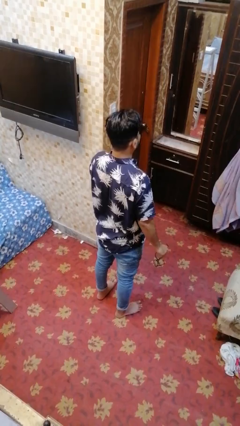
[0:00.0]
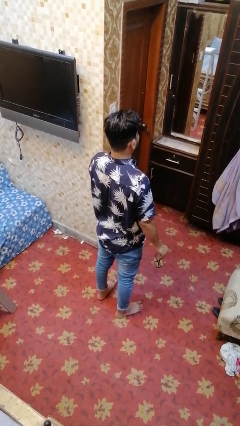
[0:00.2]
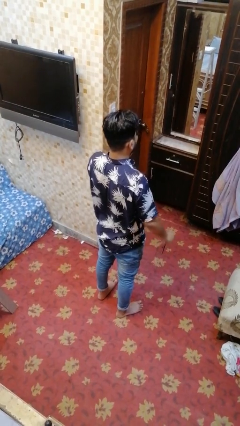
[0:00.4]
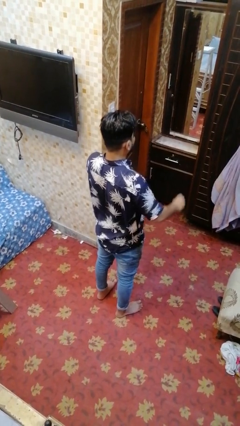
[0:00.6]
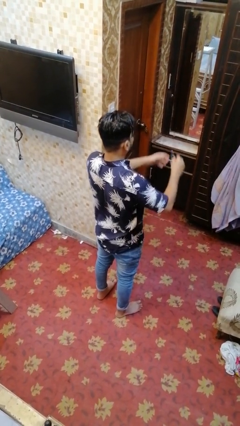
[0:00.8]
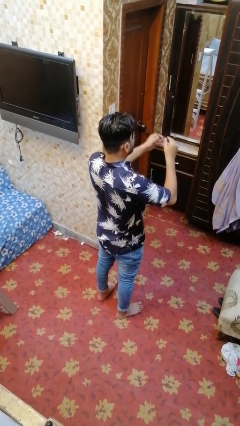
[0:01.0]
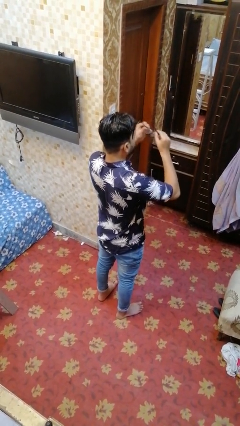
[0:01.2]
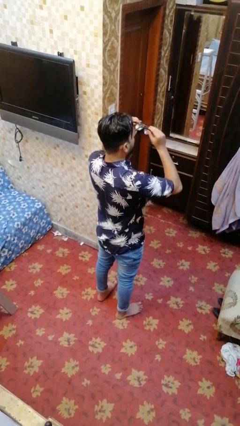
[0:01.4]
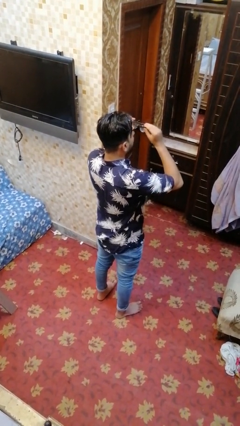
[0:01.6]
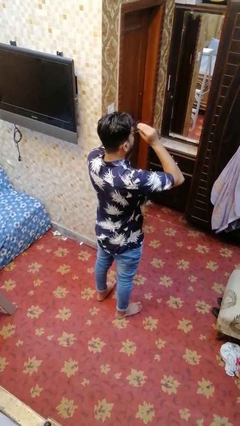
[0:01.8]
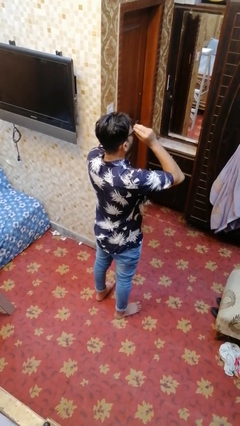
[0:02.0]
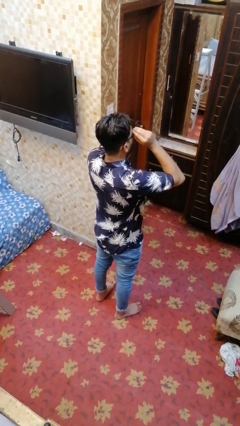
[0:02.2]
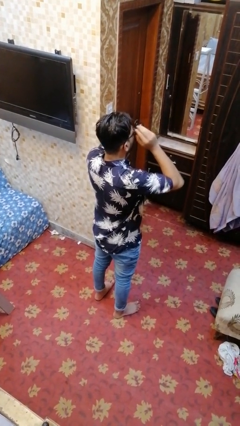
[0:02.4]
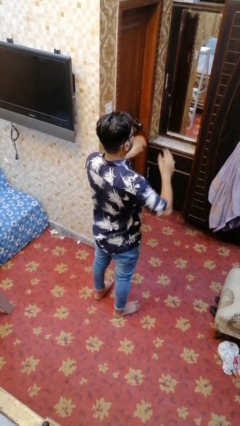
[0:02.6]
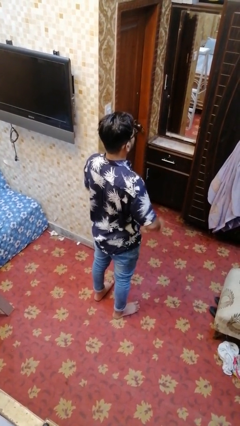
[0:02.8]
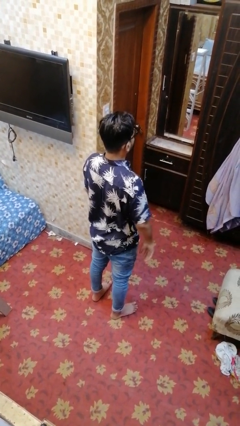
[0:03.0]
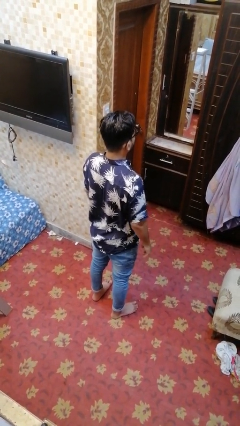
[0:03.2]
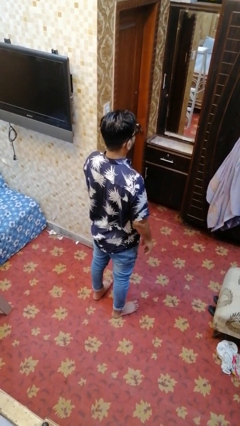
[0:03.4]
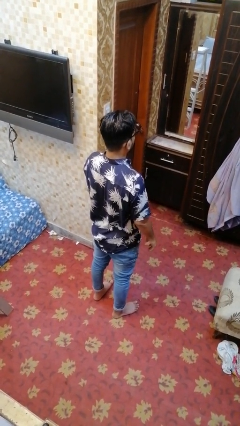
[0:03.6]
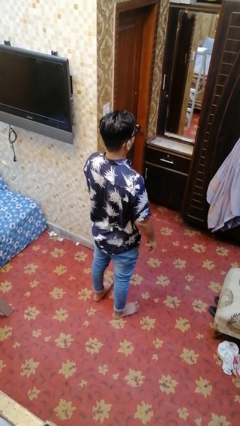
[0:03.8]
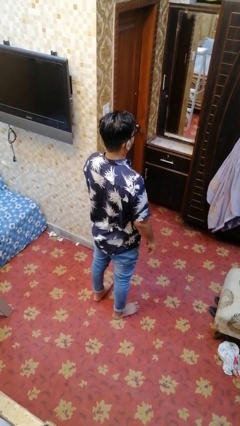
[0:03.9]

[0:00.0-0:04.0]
person puts on glasses

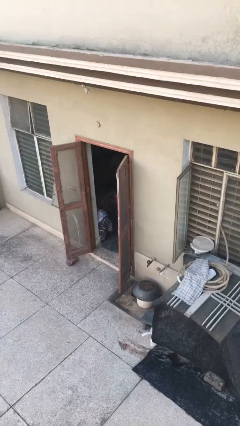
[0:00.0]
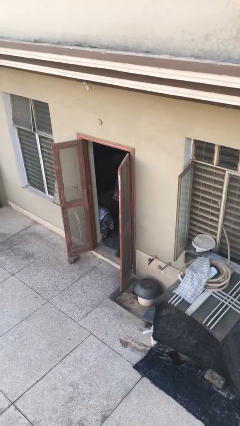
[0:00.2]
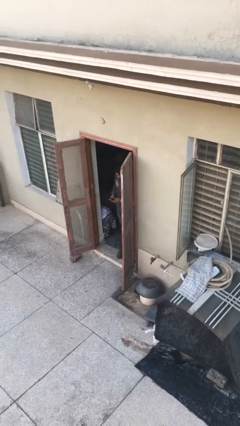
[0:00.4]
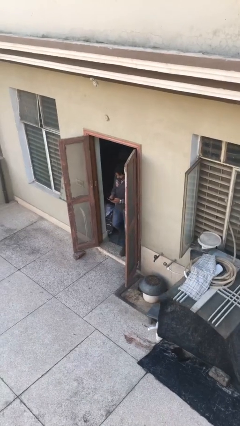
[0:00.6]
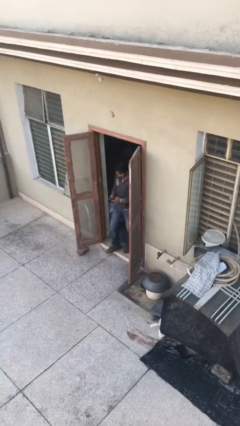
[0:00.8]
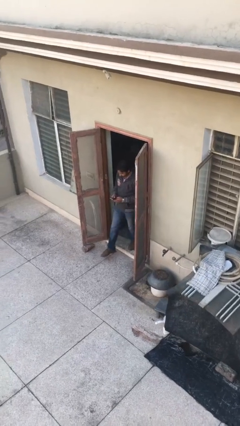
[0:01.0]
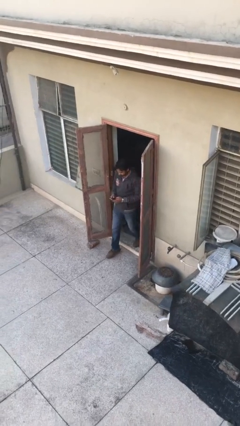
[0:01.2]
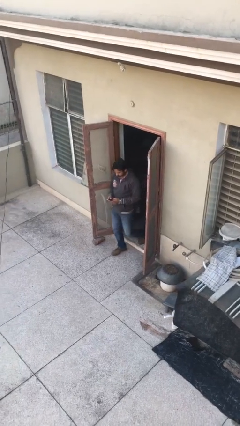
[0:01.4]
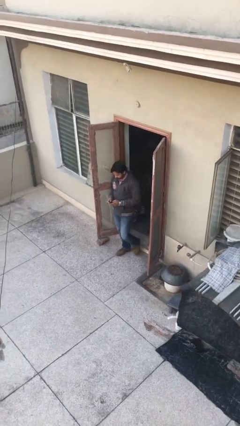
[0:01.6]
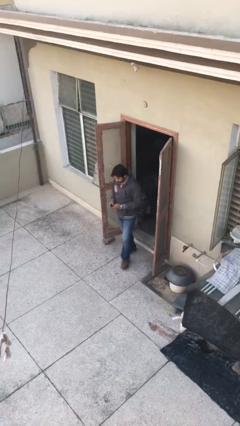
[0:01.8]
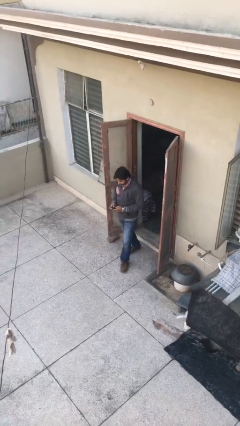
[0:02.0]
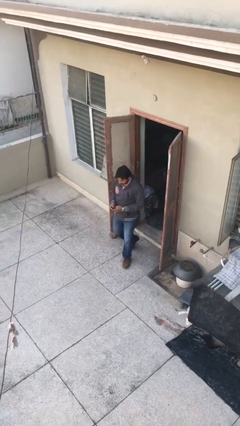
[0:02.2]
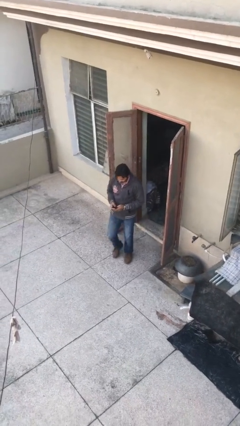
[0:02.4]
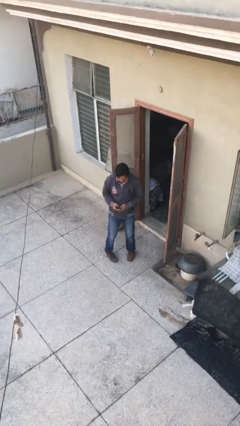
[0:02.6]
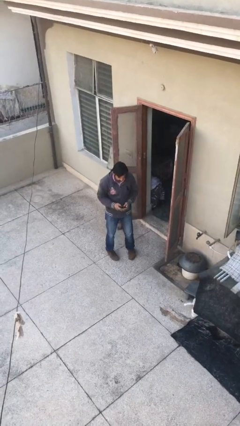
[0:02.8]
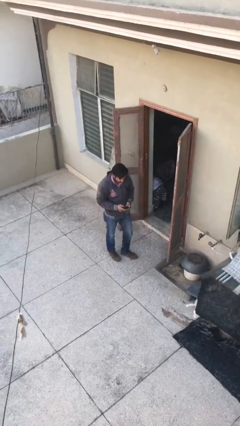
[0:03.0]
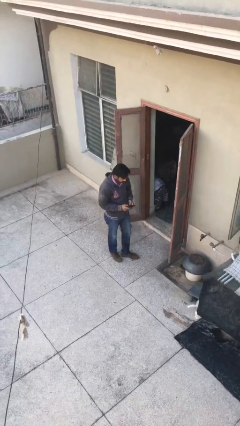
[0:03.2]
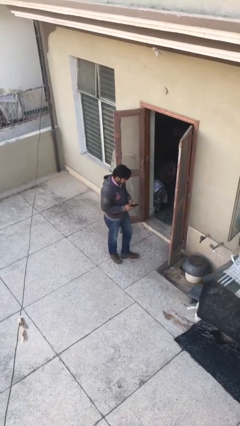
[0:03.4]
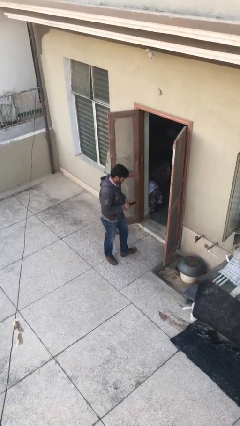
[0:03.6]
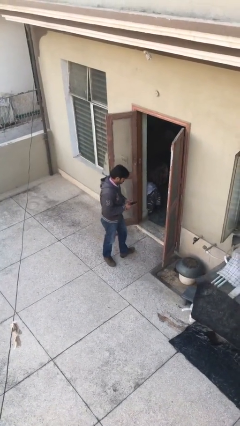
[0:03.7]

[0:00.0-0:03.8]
person enters scene through structure

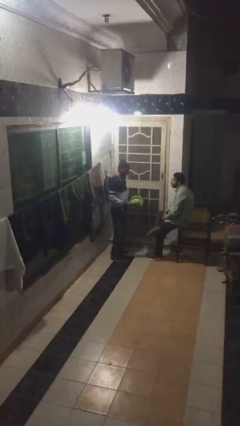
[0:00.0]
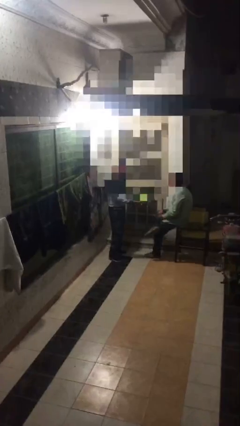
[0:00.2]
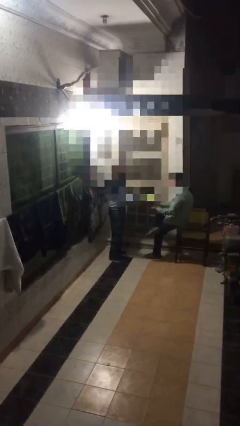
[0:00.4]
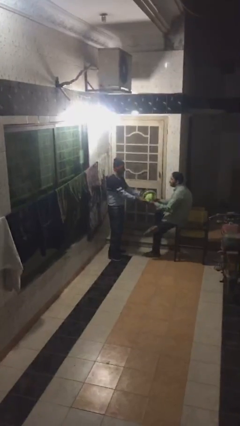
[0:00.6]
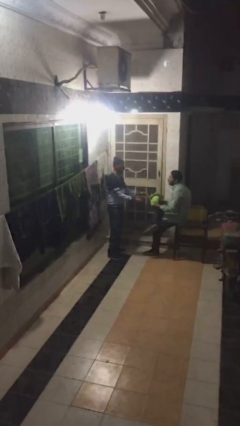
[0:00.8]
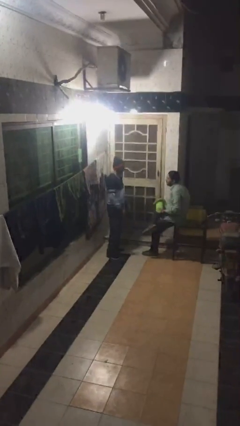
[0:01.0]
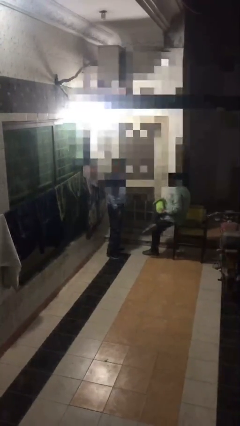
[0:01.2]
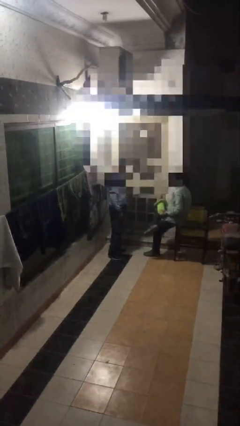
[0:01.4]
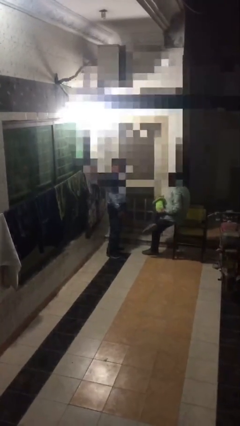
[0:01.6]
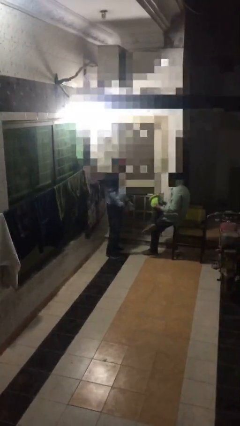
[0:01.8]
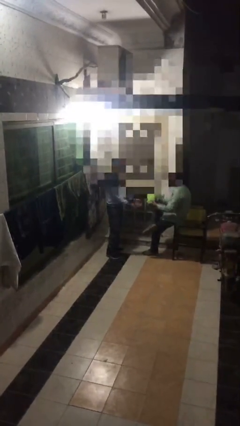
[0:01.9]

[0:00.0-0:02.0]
person transfers object to person

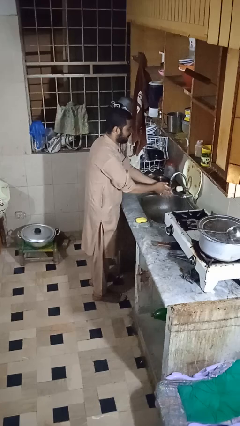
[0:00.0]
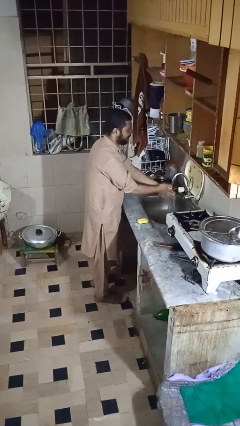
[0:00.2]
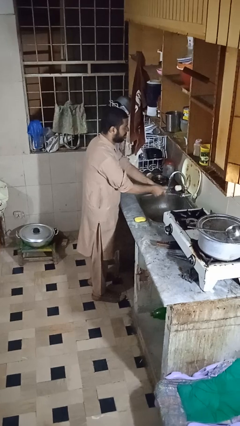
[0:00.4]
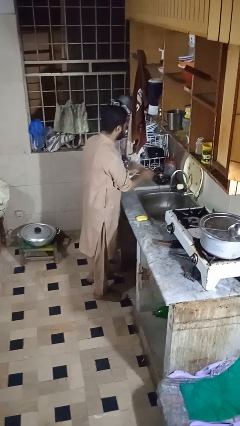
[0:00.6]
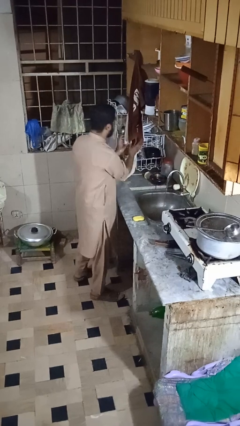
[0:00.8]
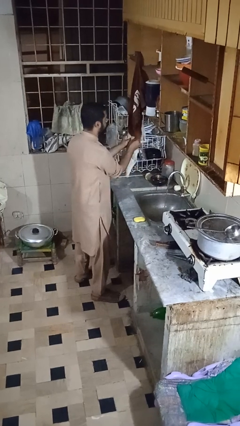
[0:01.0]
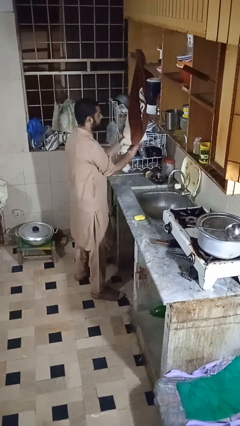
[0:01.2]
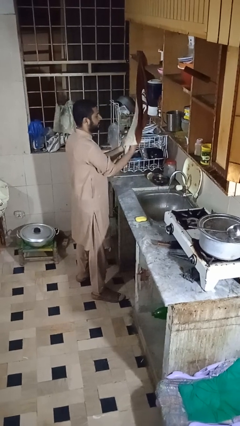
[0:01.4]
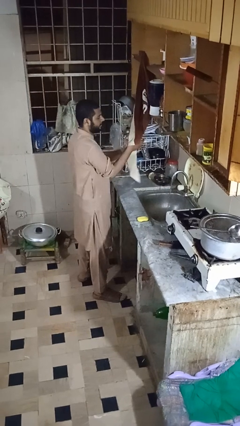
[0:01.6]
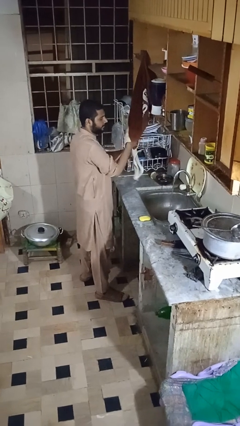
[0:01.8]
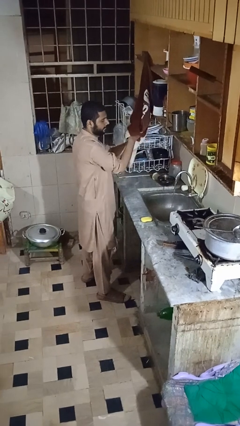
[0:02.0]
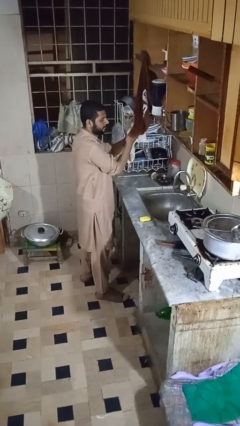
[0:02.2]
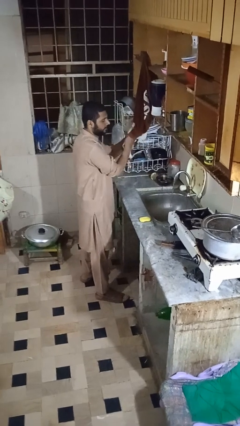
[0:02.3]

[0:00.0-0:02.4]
person dries hands with towel

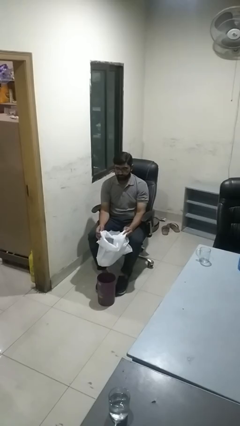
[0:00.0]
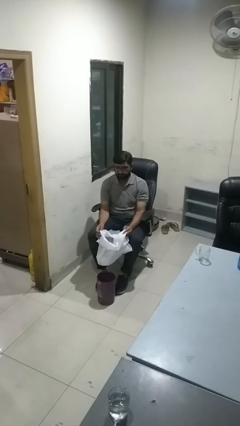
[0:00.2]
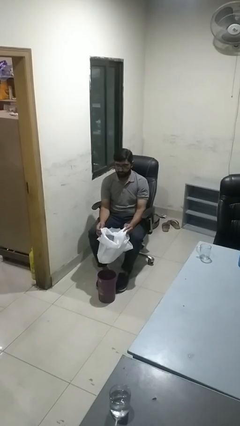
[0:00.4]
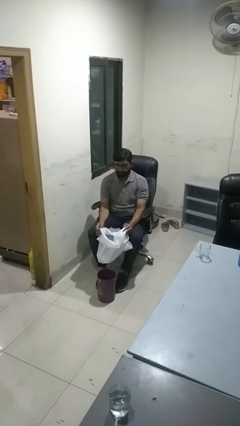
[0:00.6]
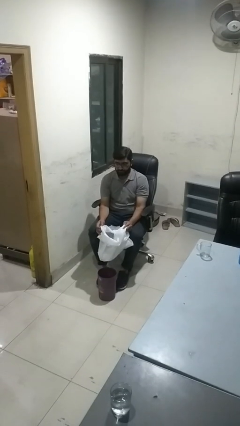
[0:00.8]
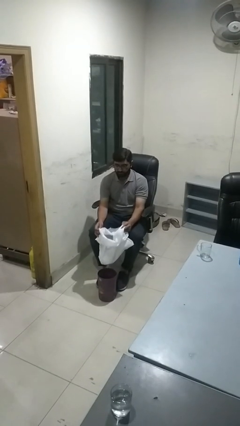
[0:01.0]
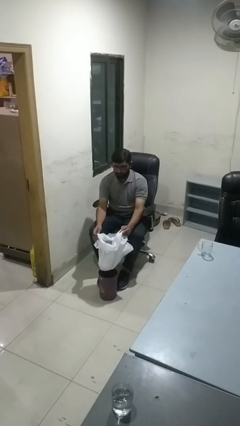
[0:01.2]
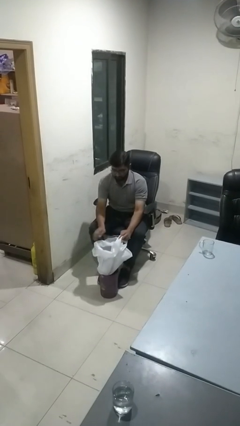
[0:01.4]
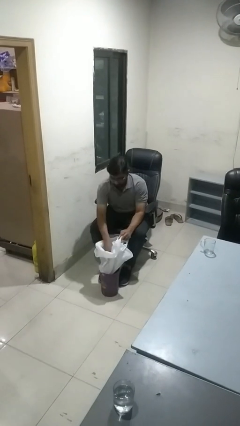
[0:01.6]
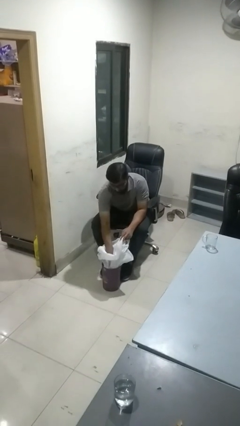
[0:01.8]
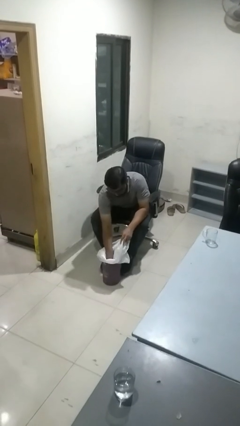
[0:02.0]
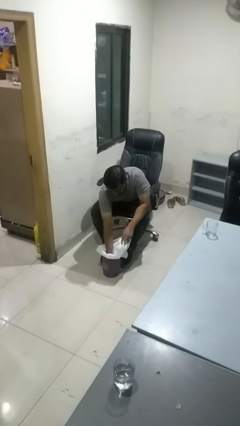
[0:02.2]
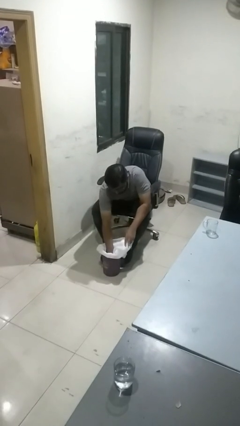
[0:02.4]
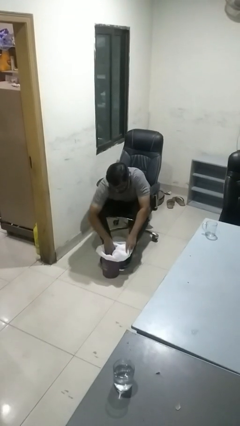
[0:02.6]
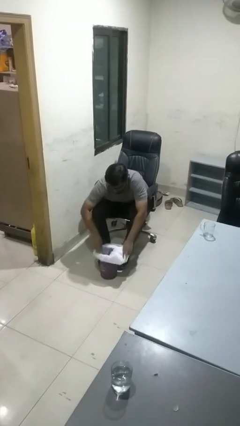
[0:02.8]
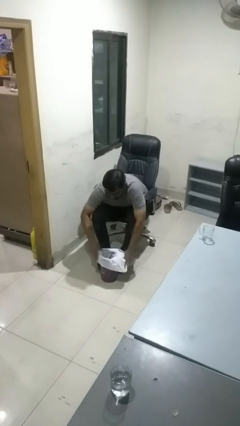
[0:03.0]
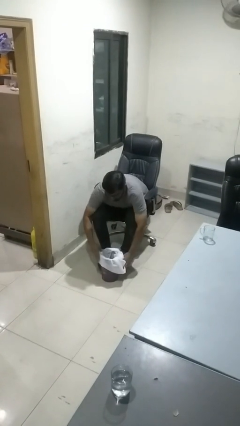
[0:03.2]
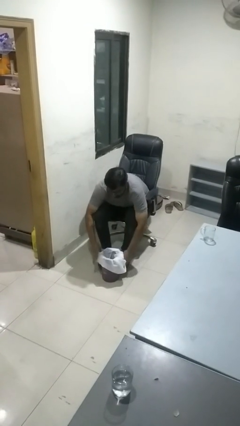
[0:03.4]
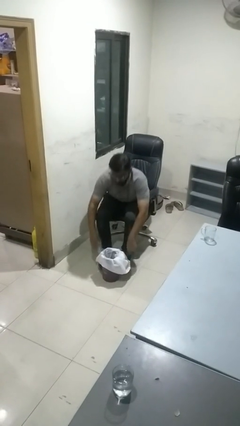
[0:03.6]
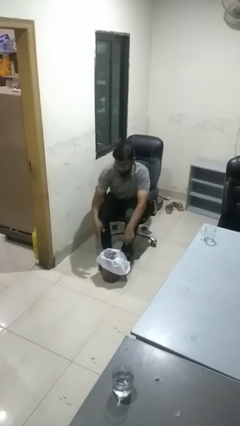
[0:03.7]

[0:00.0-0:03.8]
person inserts trashbag into trashcan

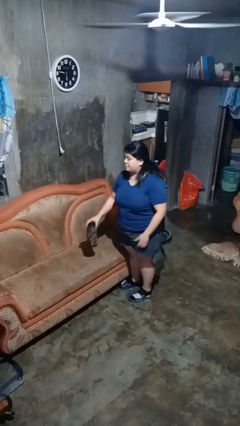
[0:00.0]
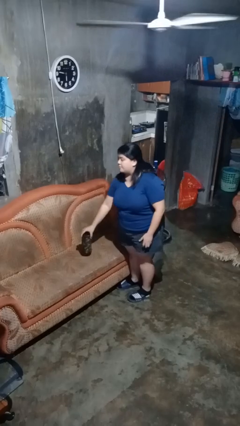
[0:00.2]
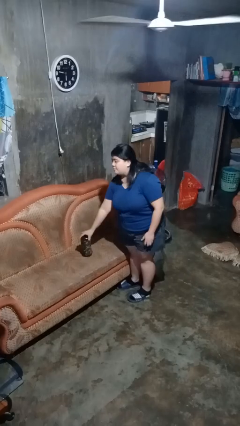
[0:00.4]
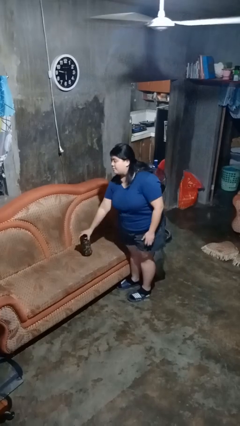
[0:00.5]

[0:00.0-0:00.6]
person puts down object on couch

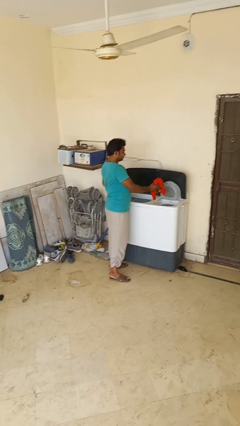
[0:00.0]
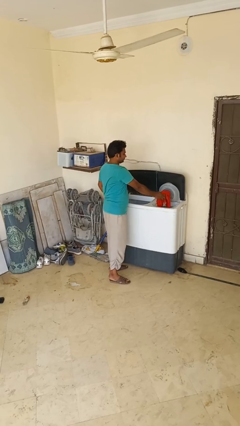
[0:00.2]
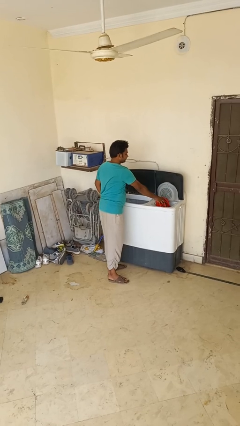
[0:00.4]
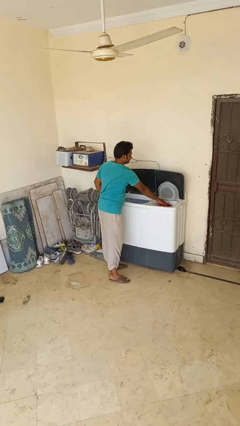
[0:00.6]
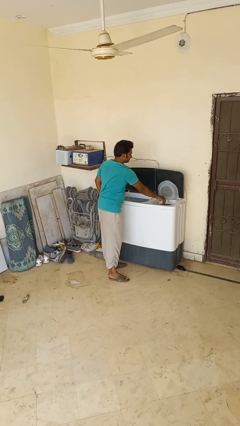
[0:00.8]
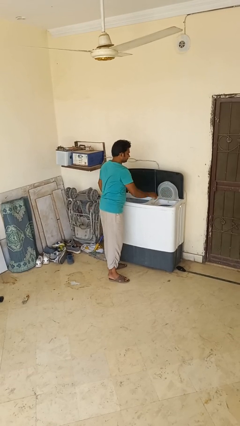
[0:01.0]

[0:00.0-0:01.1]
person loads dryer
